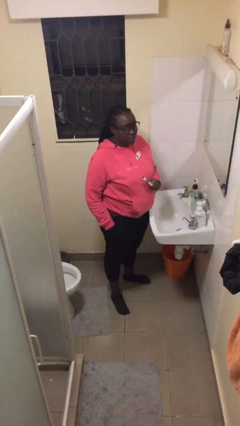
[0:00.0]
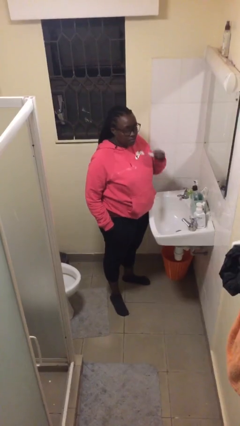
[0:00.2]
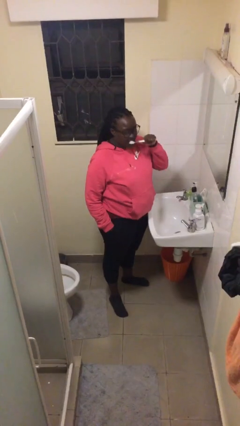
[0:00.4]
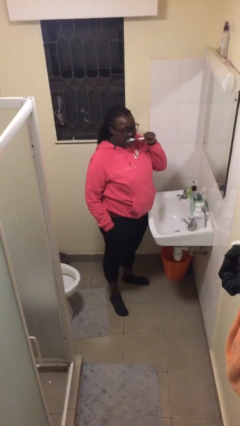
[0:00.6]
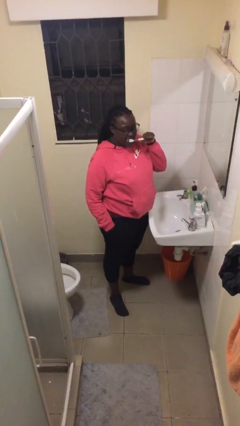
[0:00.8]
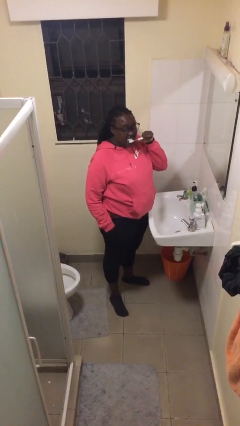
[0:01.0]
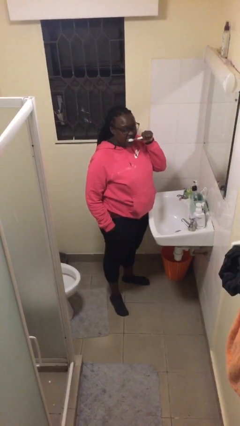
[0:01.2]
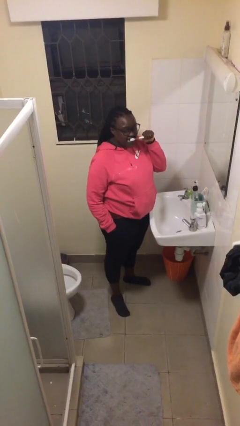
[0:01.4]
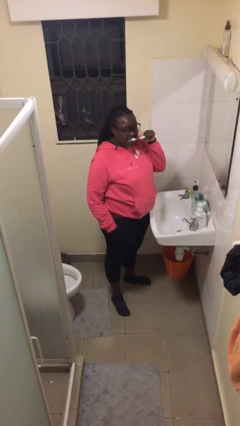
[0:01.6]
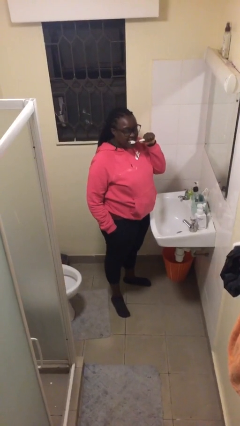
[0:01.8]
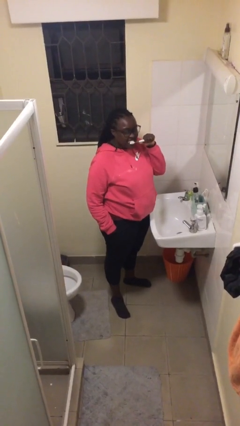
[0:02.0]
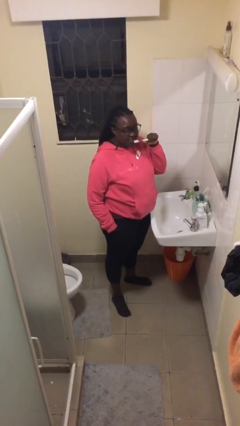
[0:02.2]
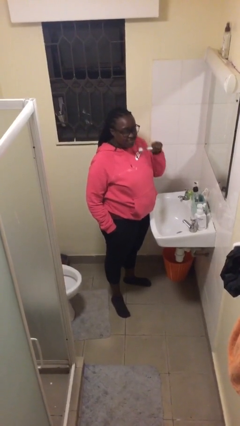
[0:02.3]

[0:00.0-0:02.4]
person brushes teeth

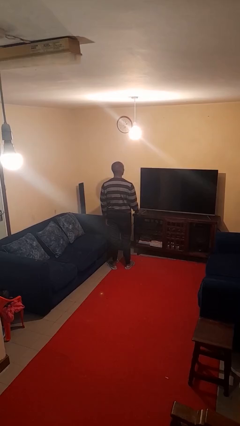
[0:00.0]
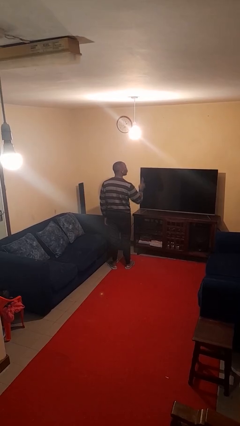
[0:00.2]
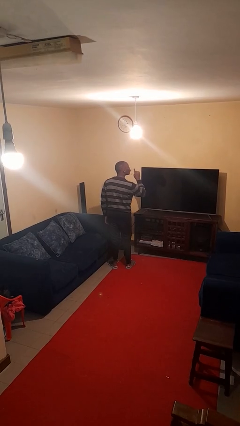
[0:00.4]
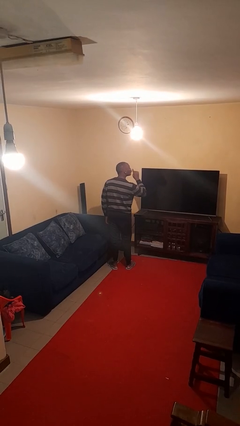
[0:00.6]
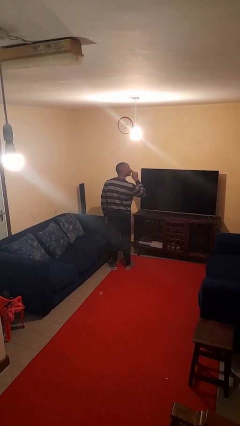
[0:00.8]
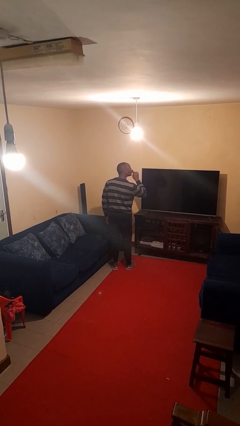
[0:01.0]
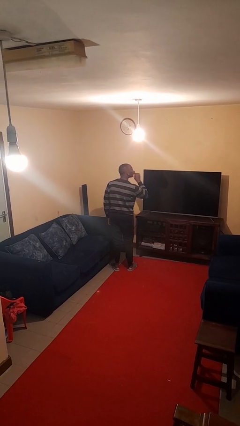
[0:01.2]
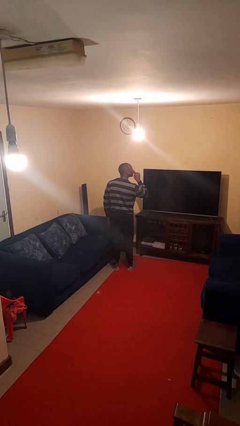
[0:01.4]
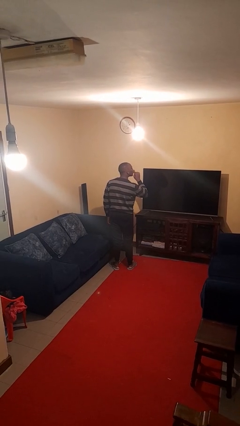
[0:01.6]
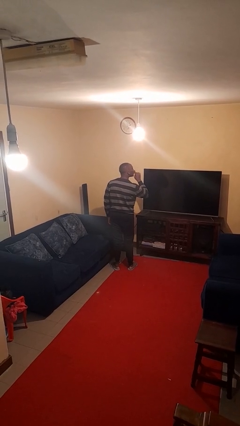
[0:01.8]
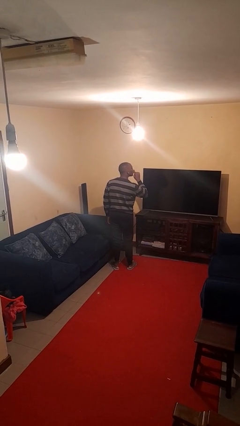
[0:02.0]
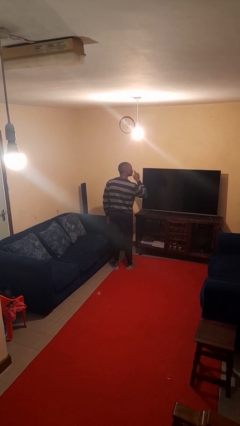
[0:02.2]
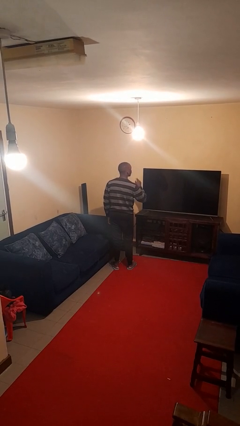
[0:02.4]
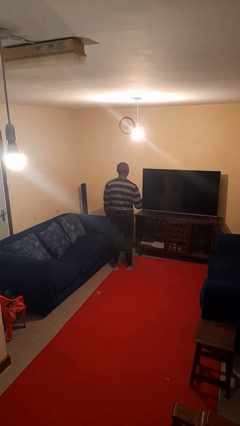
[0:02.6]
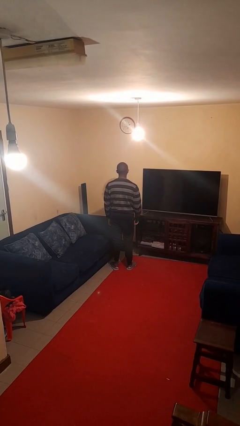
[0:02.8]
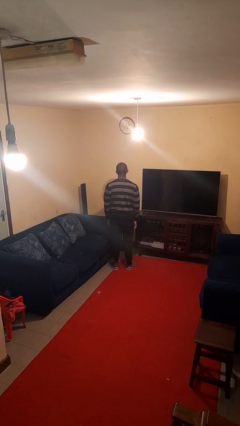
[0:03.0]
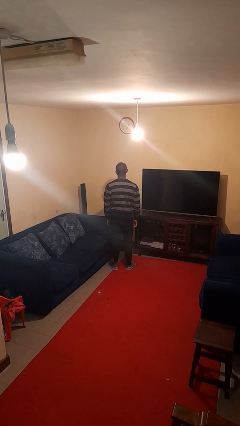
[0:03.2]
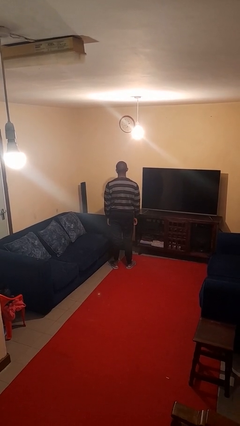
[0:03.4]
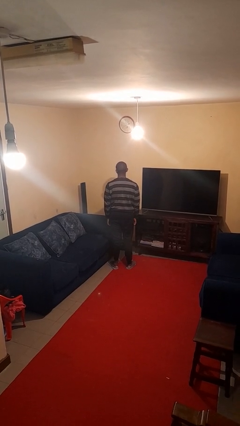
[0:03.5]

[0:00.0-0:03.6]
person gestures be quiet

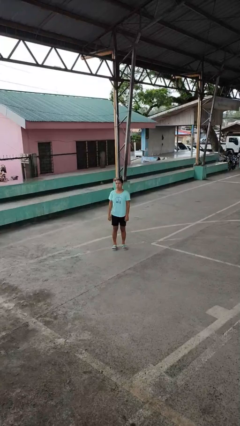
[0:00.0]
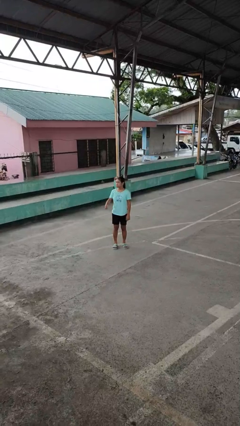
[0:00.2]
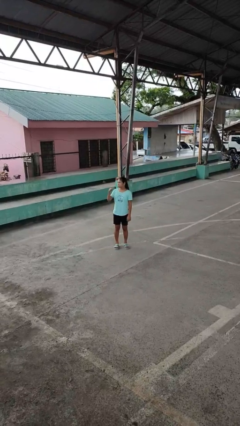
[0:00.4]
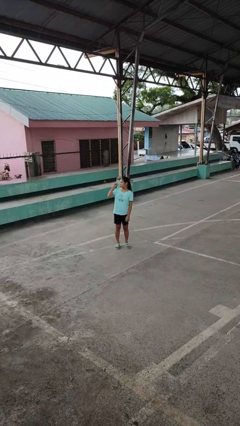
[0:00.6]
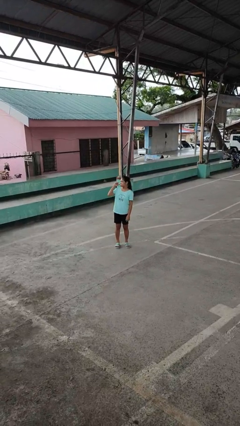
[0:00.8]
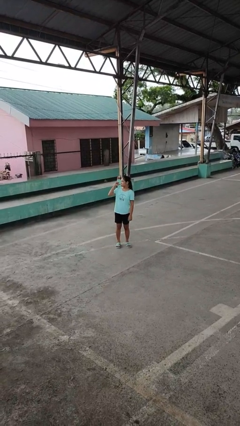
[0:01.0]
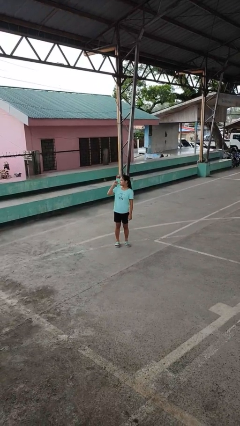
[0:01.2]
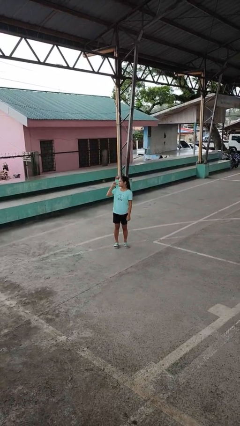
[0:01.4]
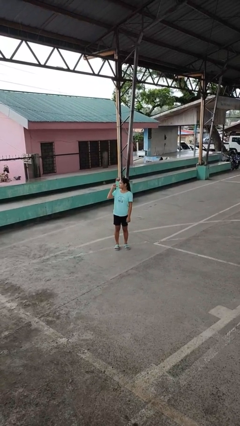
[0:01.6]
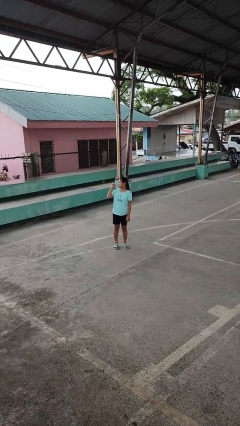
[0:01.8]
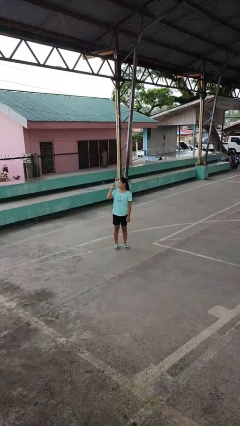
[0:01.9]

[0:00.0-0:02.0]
person gestures behind me

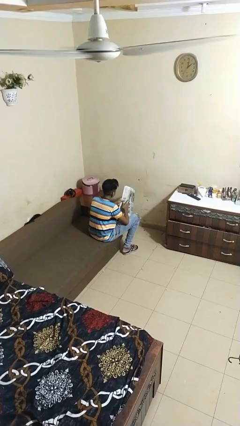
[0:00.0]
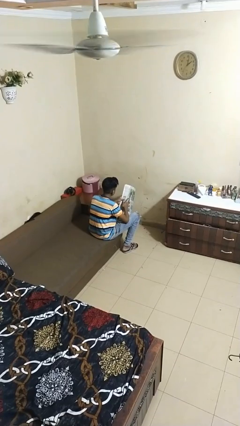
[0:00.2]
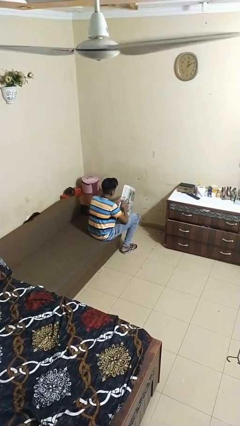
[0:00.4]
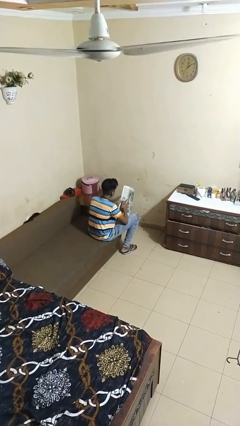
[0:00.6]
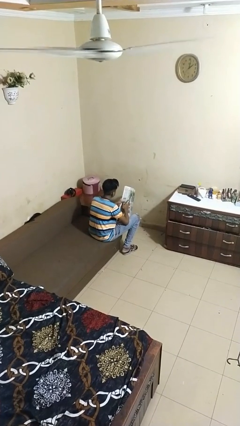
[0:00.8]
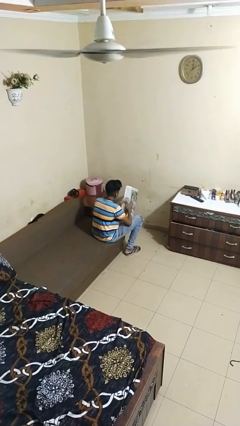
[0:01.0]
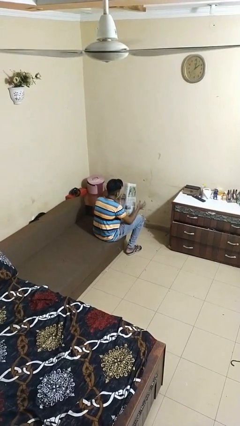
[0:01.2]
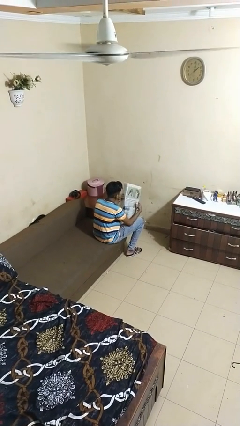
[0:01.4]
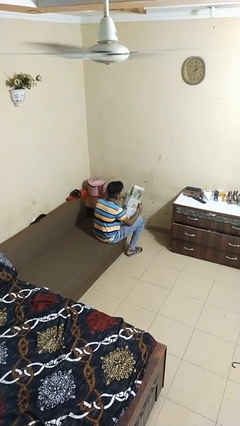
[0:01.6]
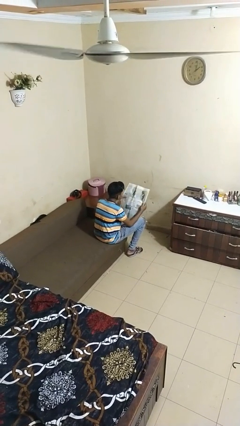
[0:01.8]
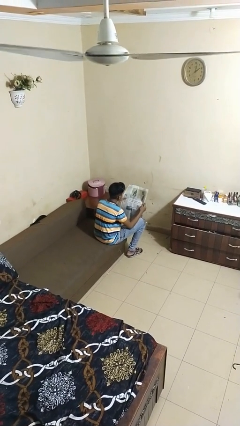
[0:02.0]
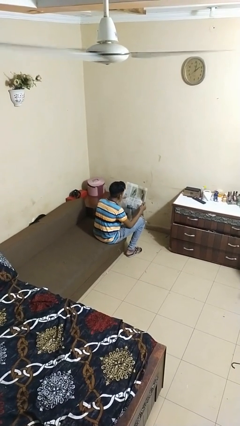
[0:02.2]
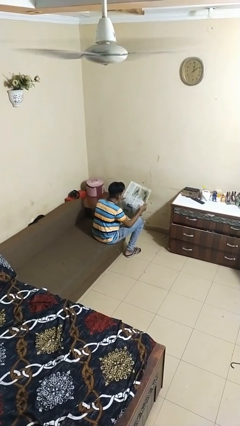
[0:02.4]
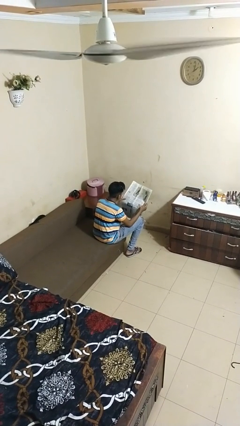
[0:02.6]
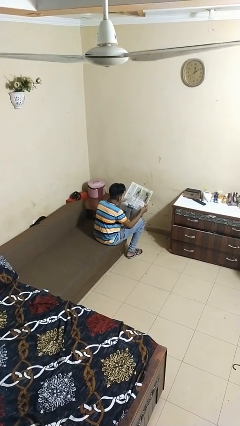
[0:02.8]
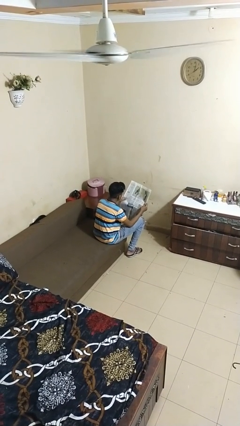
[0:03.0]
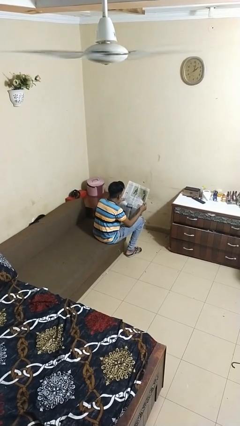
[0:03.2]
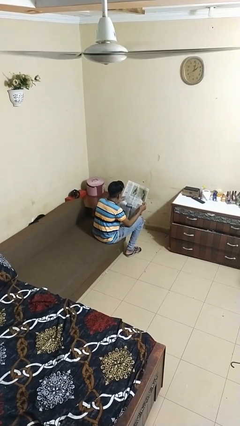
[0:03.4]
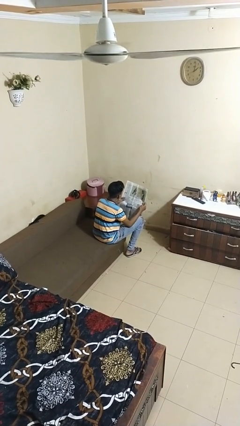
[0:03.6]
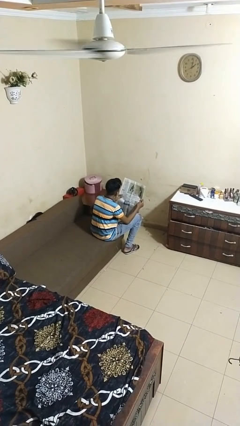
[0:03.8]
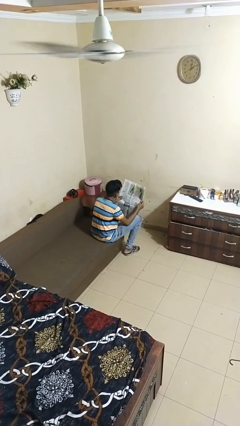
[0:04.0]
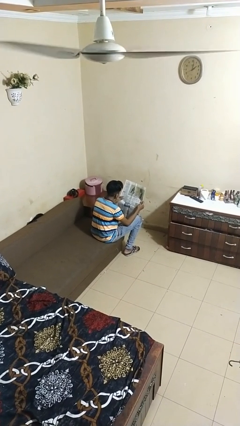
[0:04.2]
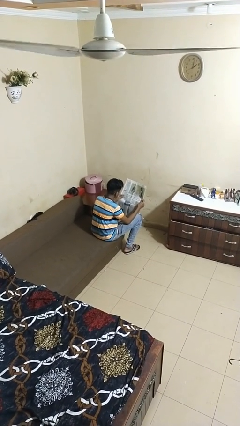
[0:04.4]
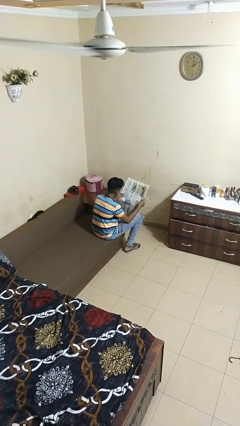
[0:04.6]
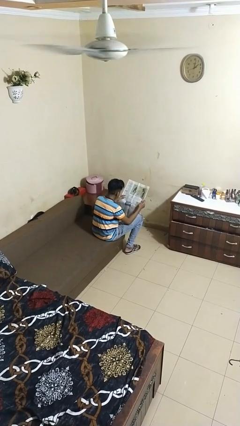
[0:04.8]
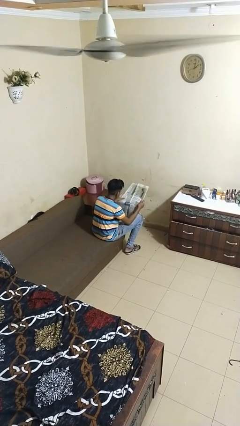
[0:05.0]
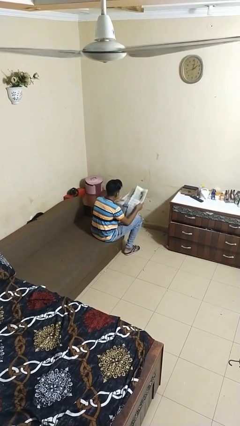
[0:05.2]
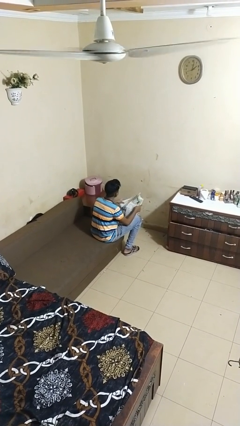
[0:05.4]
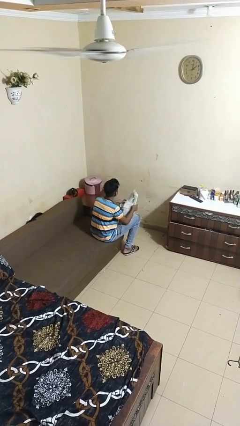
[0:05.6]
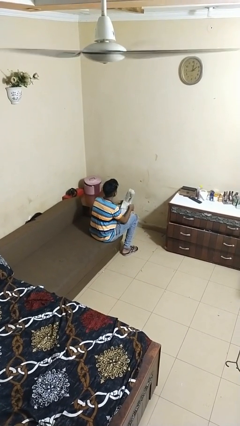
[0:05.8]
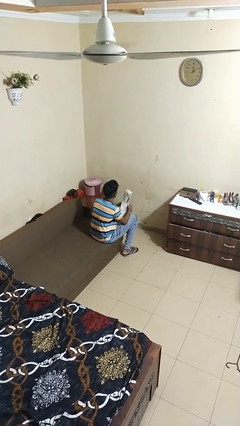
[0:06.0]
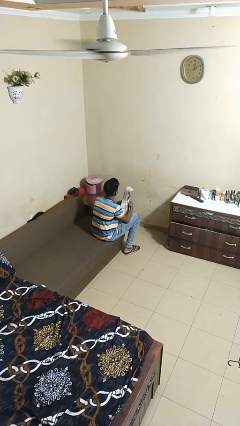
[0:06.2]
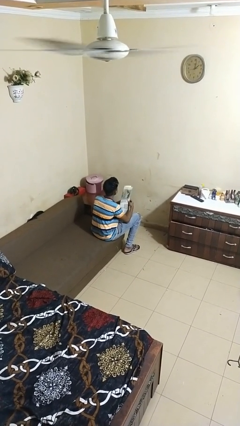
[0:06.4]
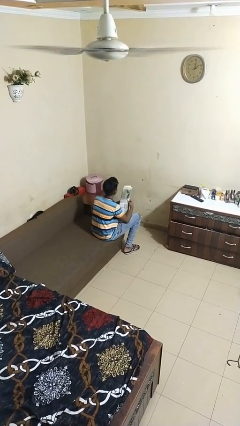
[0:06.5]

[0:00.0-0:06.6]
person reads newspaper

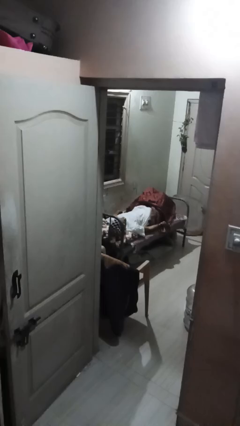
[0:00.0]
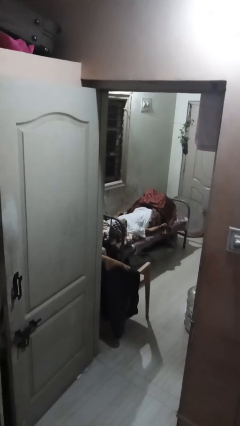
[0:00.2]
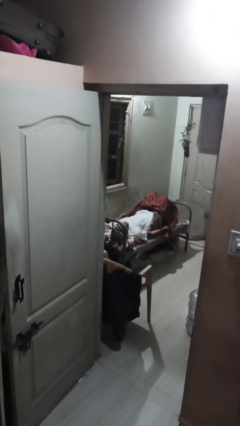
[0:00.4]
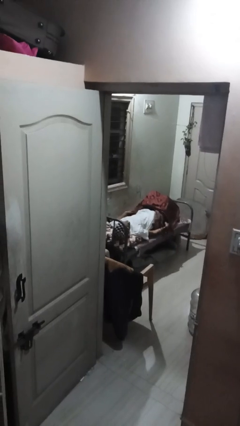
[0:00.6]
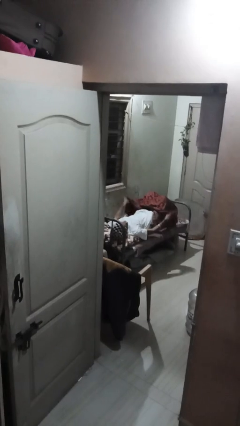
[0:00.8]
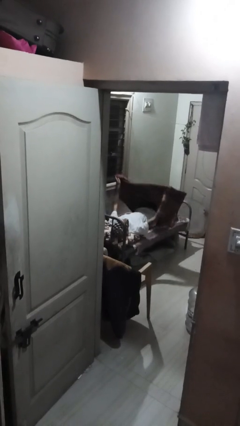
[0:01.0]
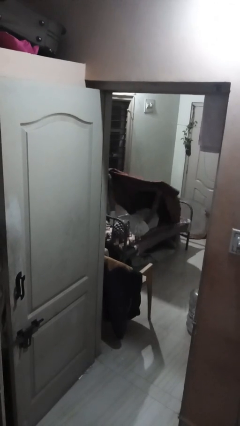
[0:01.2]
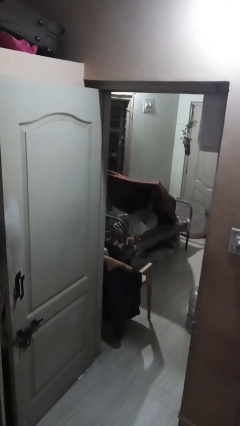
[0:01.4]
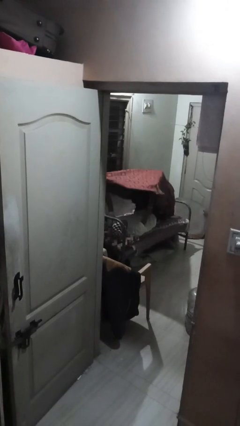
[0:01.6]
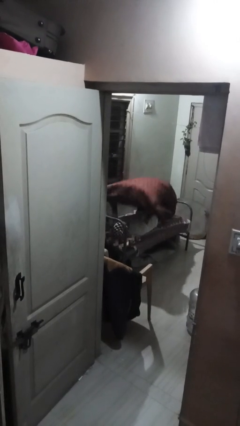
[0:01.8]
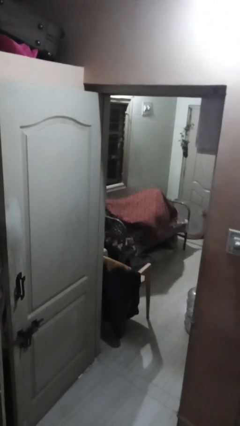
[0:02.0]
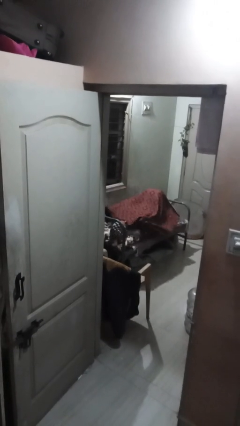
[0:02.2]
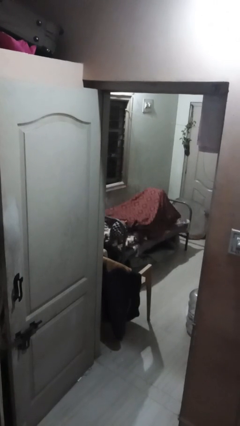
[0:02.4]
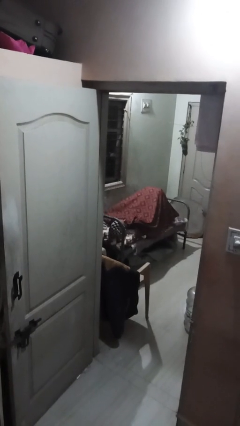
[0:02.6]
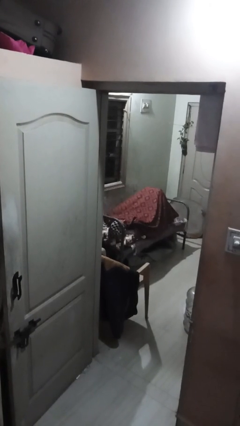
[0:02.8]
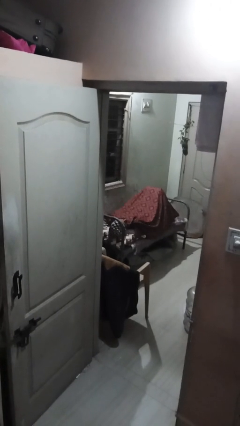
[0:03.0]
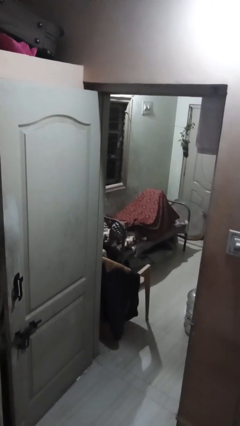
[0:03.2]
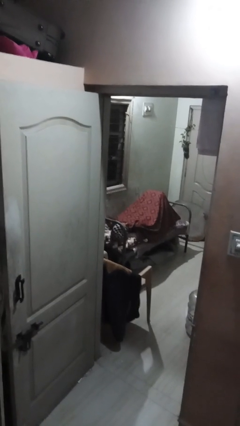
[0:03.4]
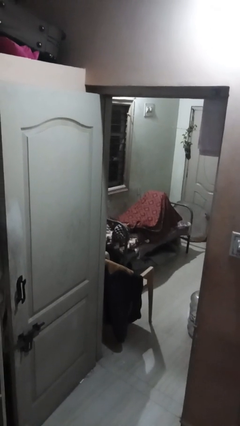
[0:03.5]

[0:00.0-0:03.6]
person covers with bedsheets
